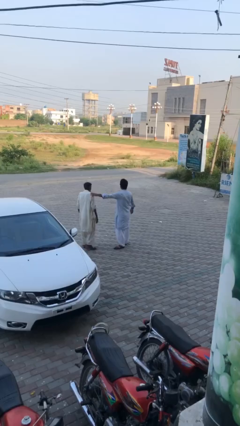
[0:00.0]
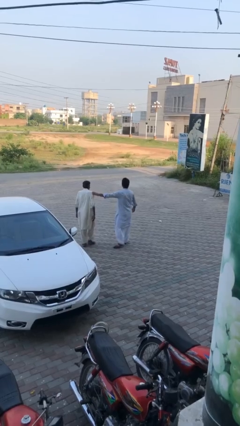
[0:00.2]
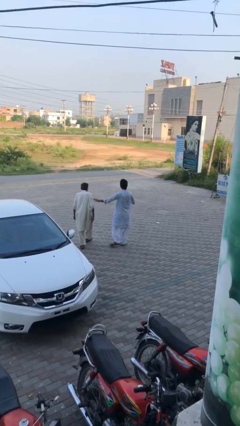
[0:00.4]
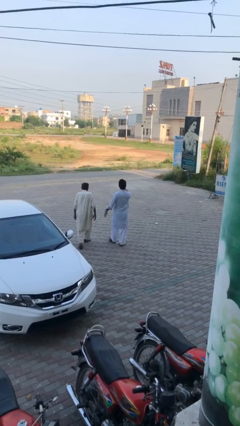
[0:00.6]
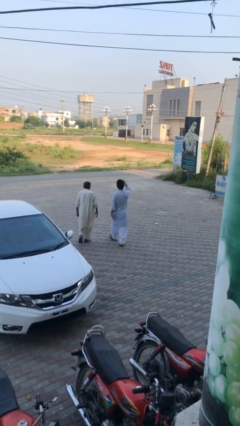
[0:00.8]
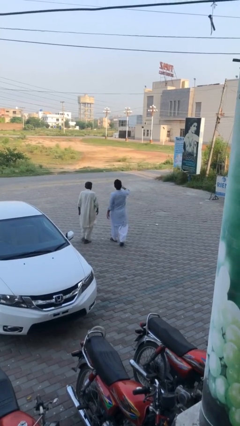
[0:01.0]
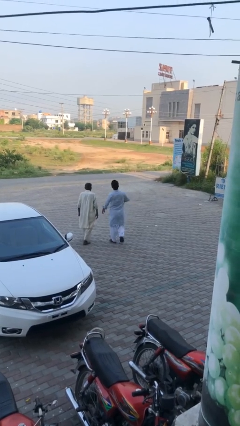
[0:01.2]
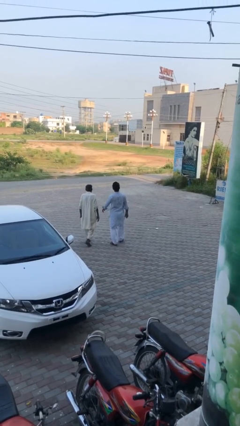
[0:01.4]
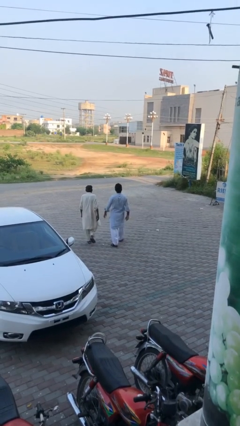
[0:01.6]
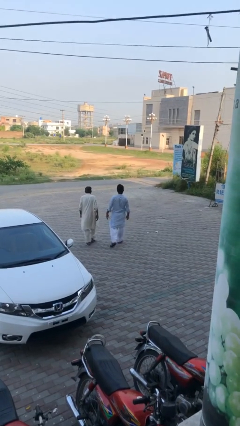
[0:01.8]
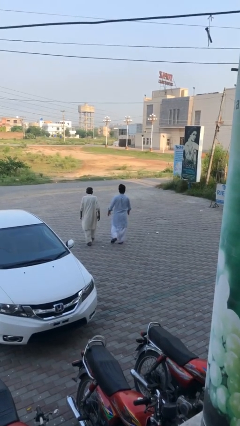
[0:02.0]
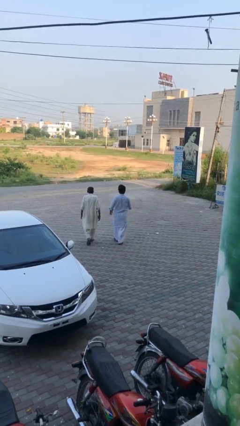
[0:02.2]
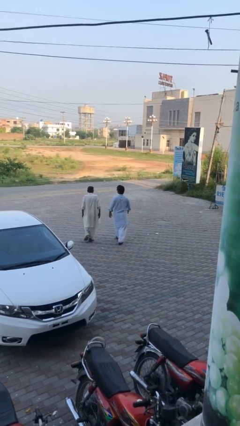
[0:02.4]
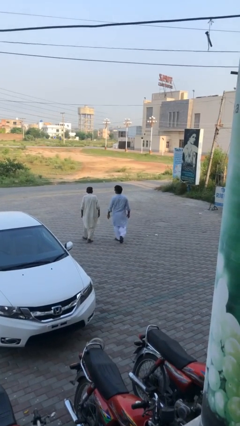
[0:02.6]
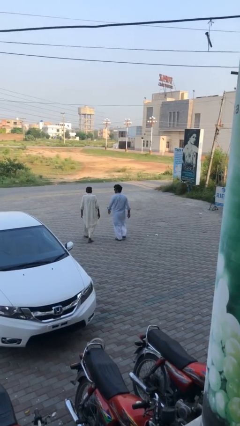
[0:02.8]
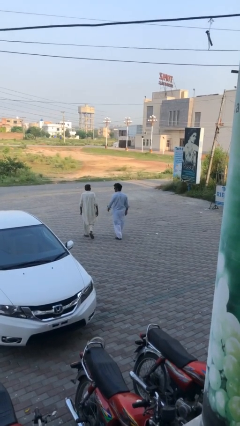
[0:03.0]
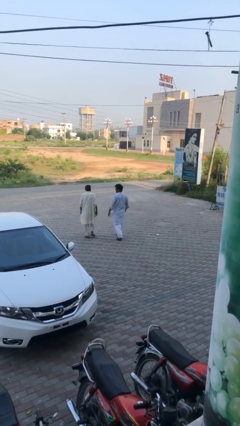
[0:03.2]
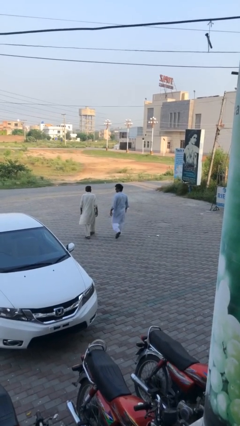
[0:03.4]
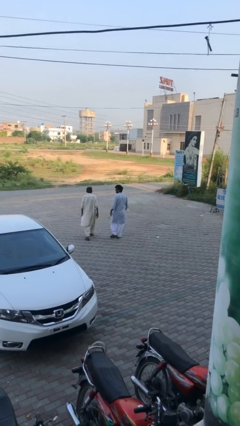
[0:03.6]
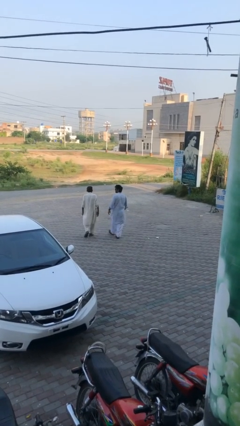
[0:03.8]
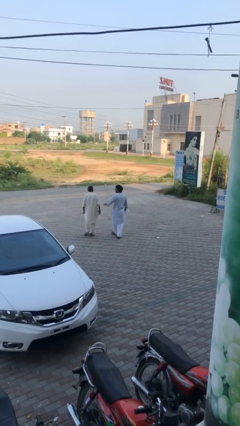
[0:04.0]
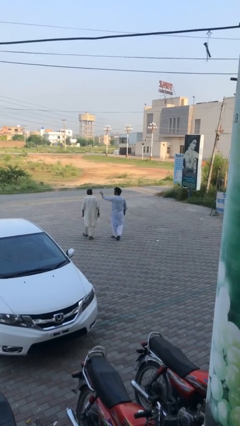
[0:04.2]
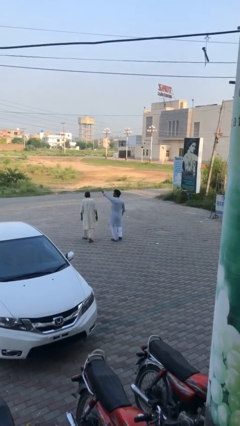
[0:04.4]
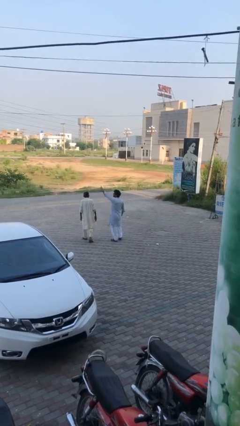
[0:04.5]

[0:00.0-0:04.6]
person talks to person

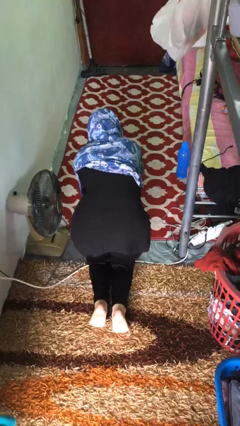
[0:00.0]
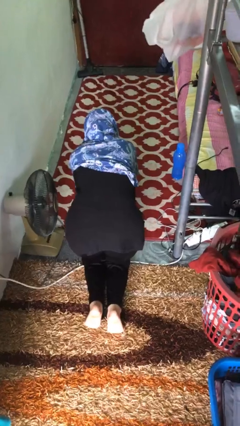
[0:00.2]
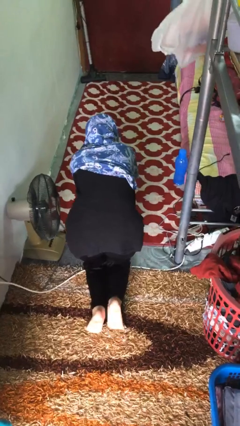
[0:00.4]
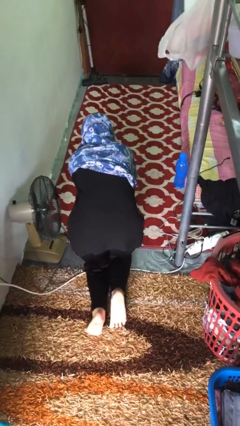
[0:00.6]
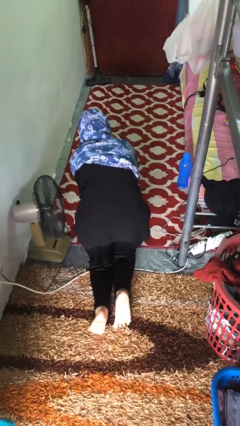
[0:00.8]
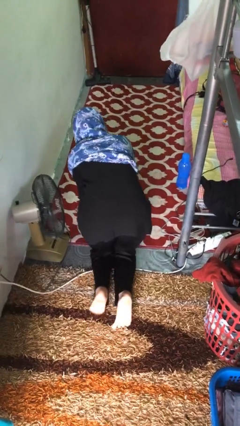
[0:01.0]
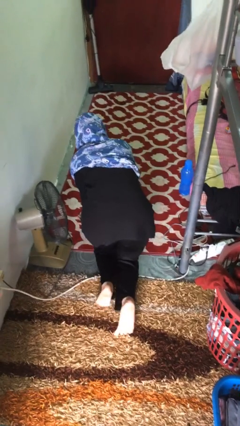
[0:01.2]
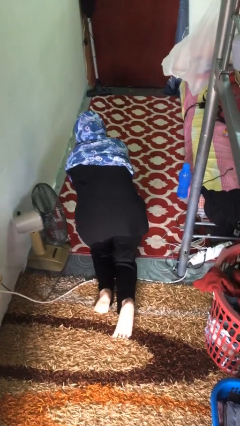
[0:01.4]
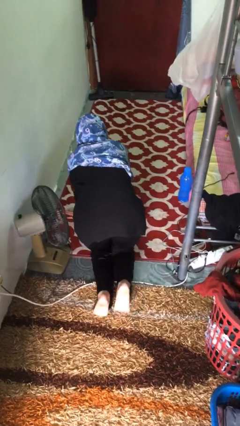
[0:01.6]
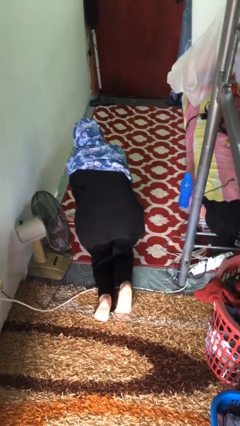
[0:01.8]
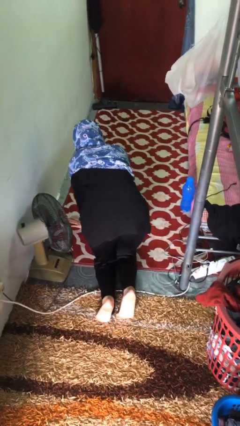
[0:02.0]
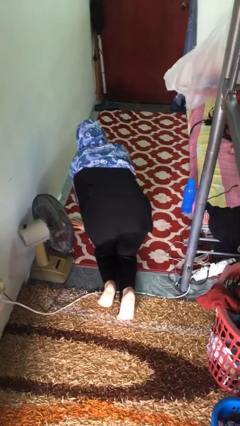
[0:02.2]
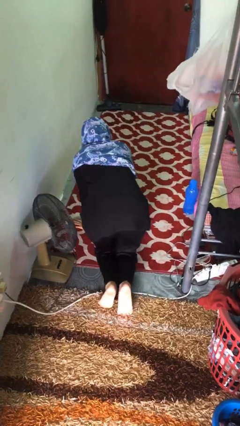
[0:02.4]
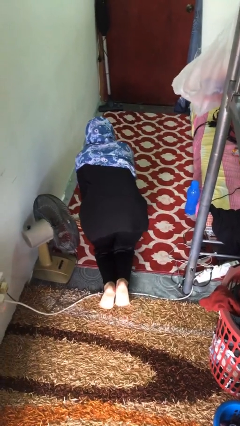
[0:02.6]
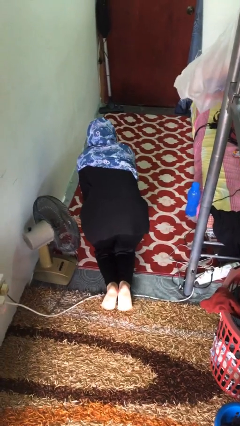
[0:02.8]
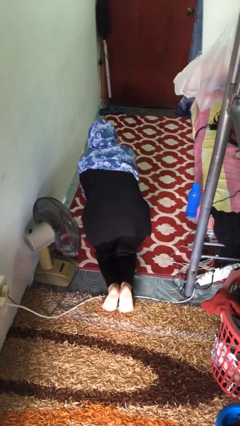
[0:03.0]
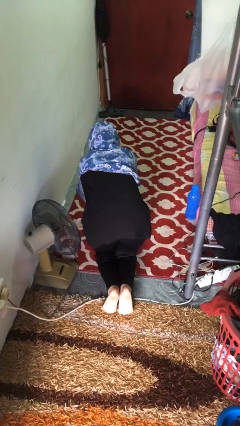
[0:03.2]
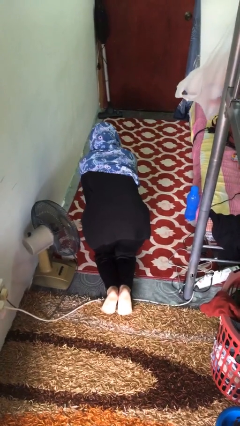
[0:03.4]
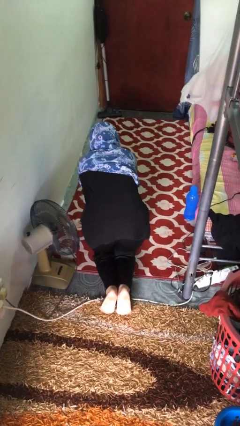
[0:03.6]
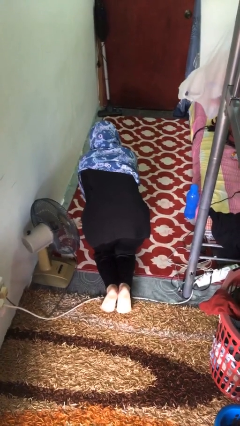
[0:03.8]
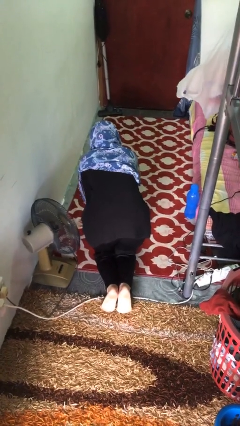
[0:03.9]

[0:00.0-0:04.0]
person crawls

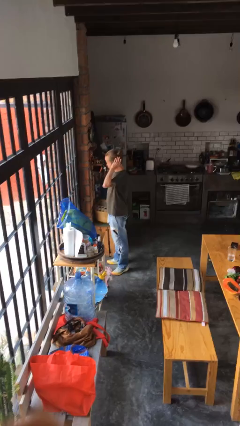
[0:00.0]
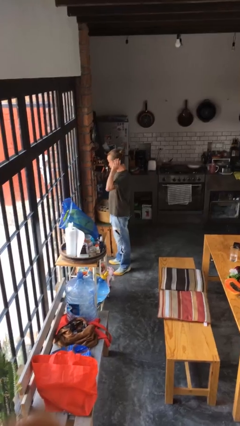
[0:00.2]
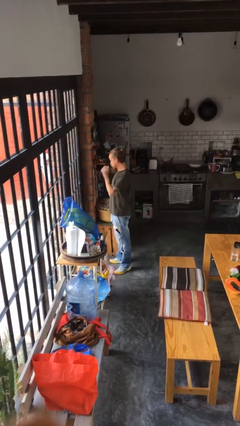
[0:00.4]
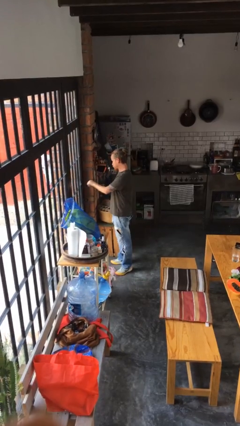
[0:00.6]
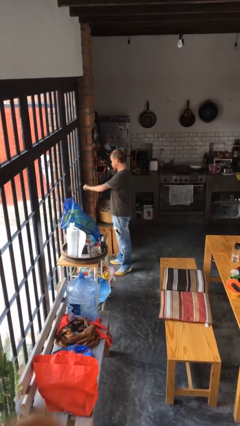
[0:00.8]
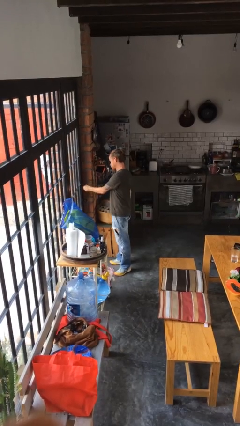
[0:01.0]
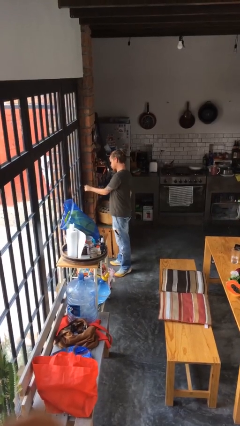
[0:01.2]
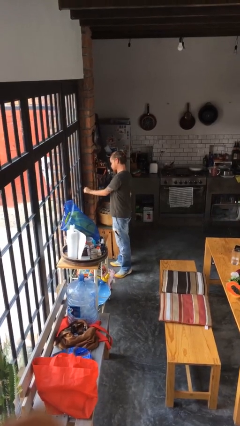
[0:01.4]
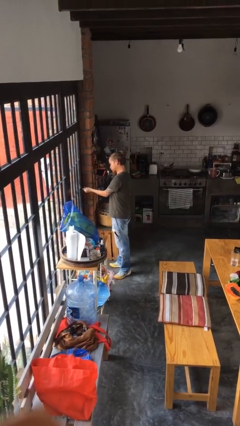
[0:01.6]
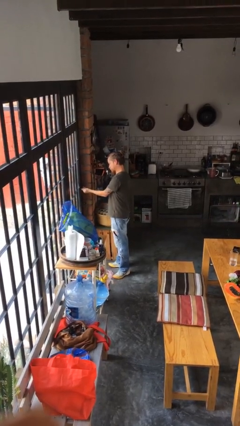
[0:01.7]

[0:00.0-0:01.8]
person unlocks door with keys

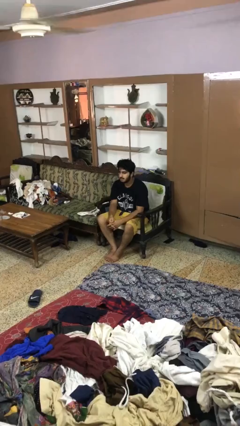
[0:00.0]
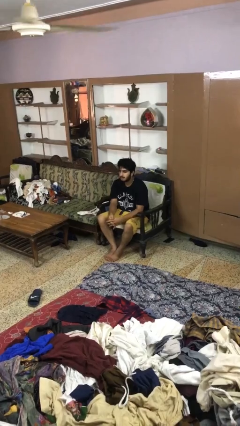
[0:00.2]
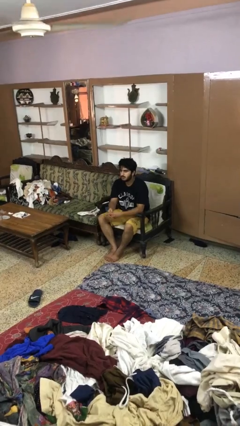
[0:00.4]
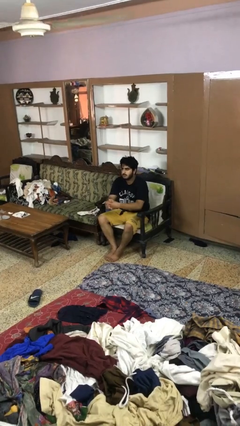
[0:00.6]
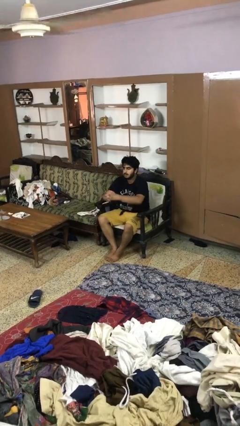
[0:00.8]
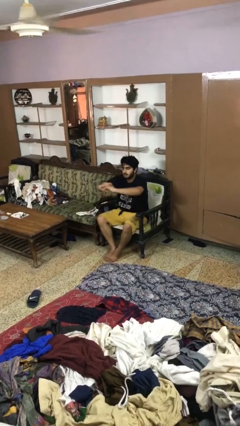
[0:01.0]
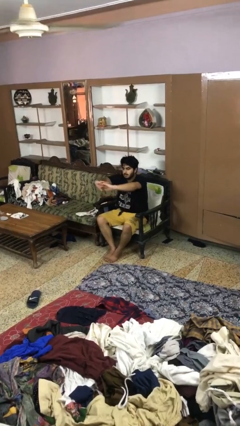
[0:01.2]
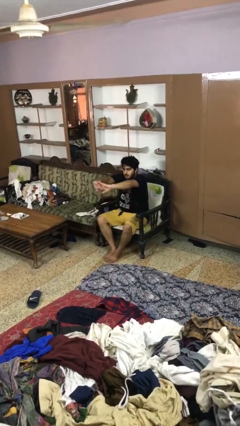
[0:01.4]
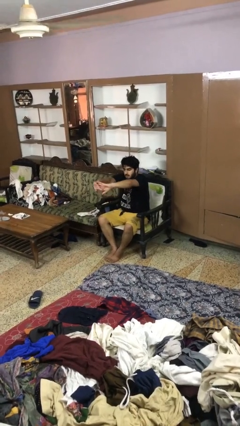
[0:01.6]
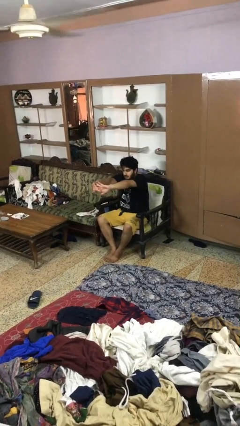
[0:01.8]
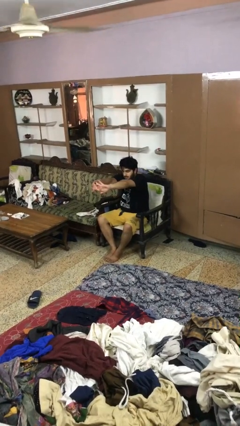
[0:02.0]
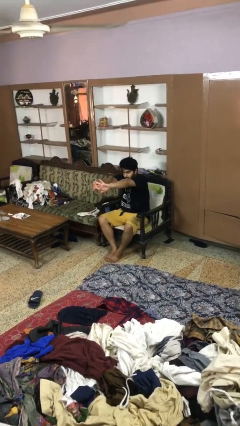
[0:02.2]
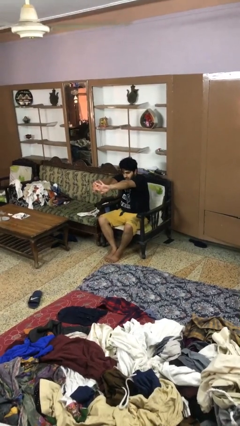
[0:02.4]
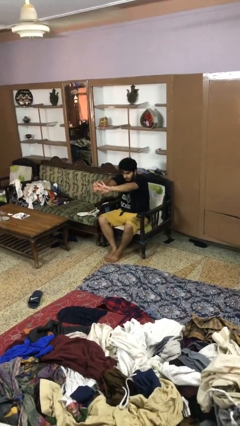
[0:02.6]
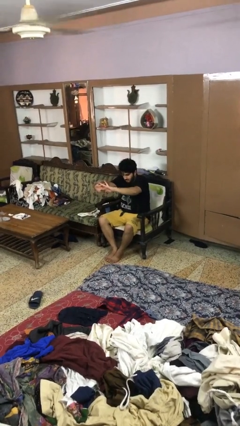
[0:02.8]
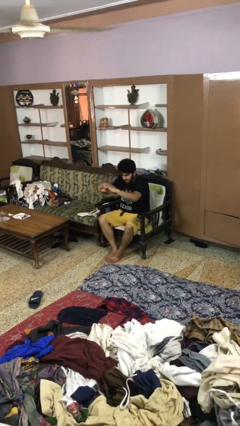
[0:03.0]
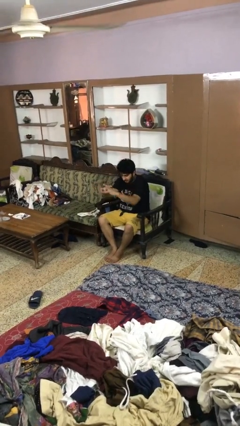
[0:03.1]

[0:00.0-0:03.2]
person cracks knuckles

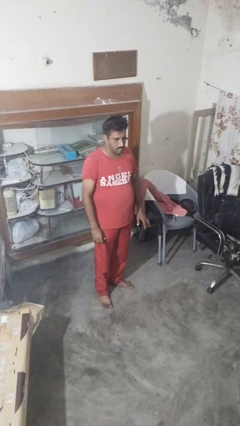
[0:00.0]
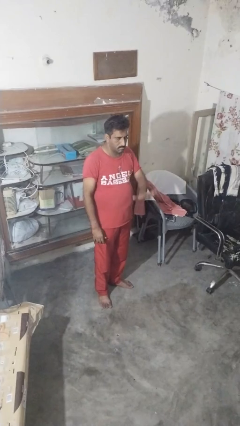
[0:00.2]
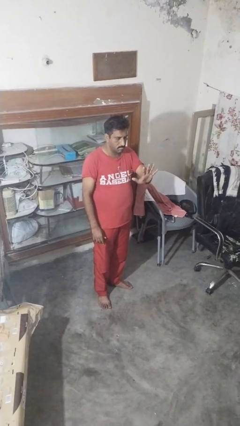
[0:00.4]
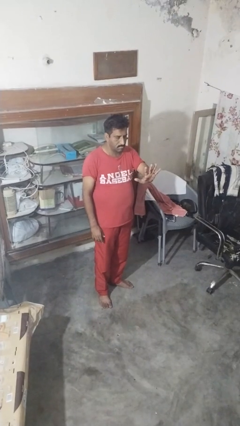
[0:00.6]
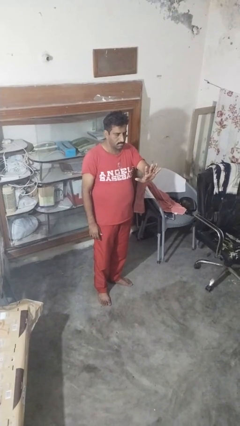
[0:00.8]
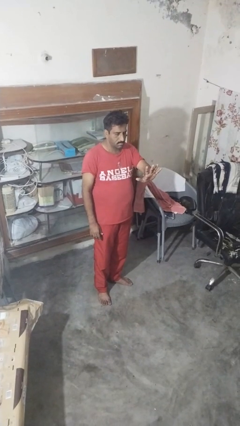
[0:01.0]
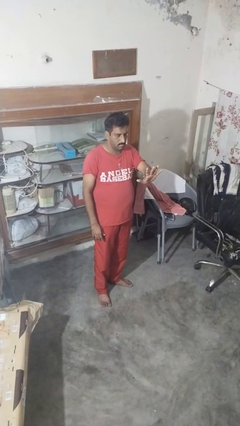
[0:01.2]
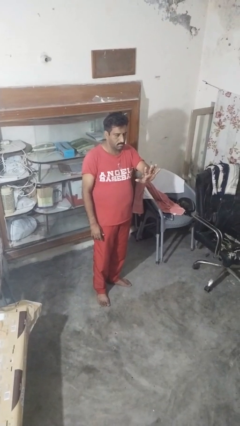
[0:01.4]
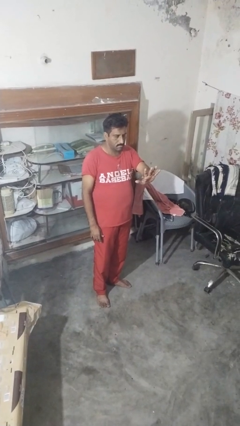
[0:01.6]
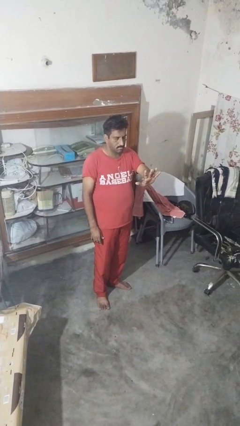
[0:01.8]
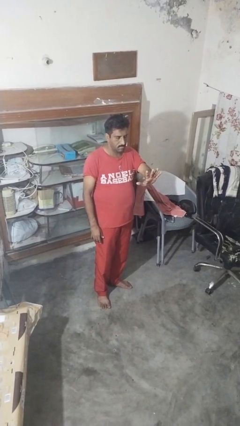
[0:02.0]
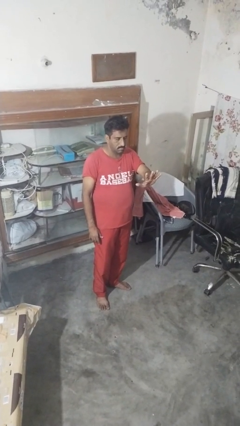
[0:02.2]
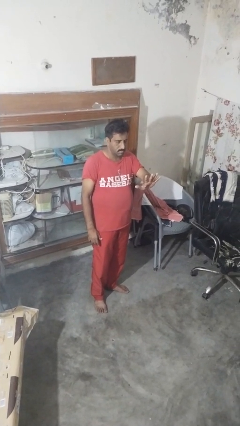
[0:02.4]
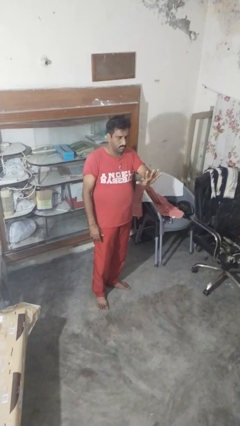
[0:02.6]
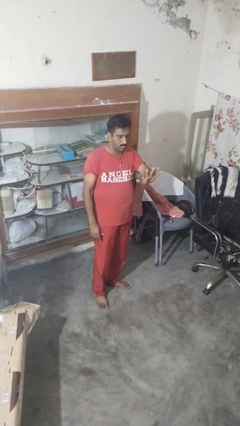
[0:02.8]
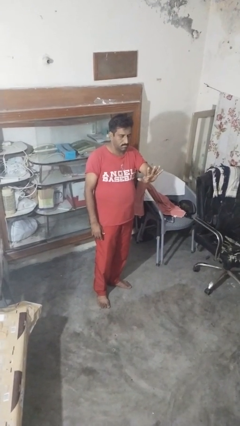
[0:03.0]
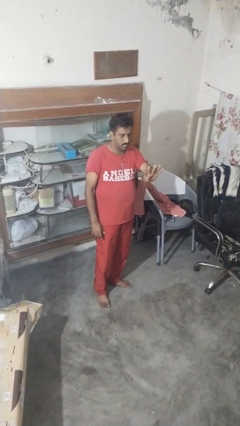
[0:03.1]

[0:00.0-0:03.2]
person gestures number five

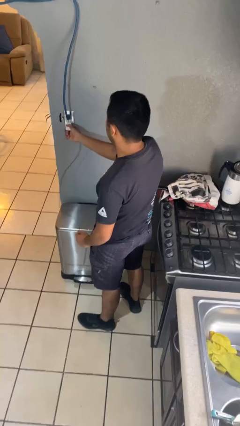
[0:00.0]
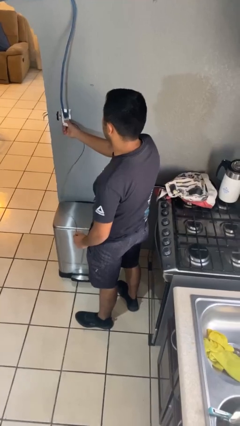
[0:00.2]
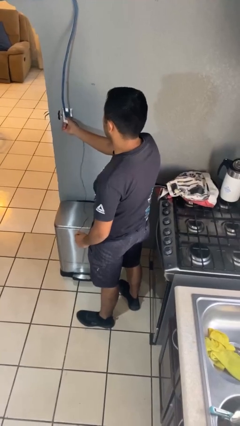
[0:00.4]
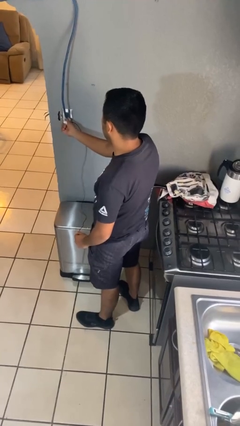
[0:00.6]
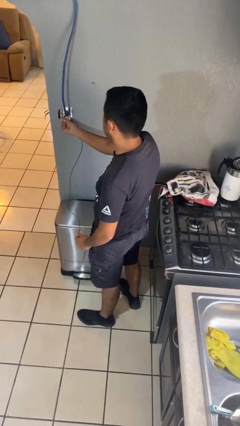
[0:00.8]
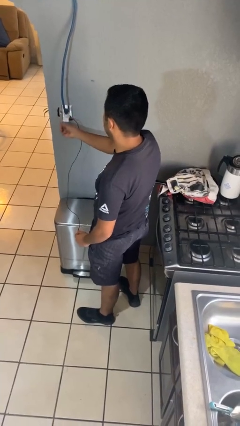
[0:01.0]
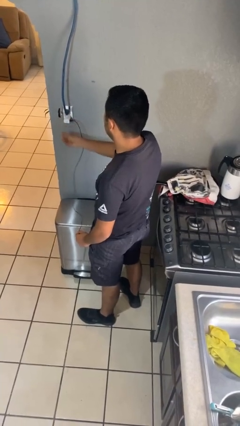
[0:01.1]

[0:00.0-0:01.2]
person plugs into electrical socket
